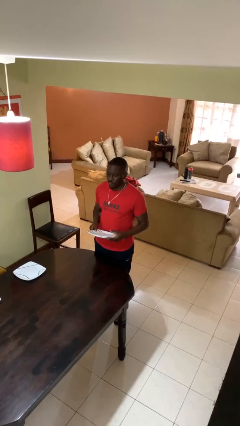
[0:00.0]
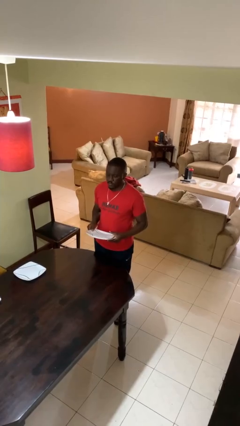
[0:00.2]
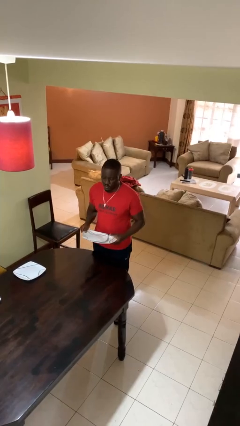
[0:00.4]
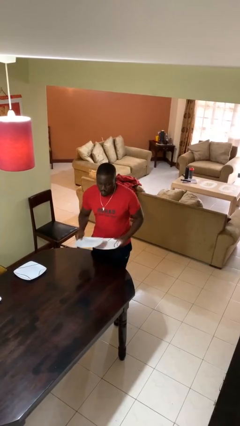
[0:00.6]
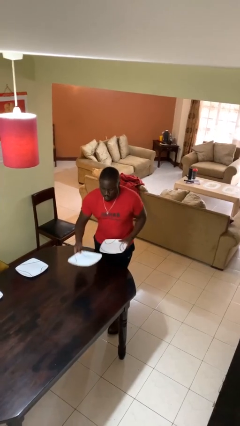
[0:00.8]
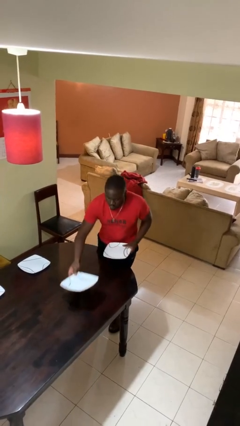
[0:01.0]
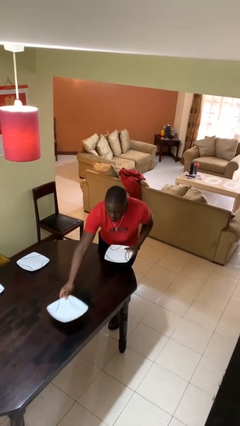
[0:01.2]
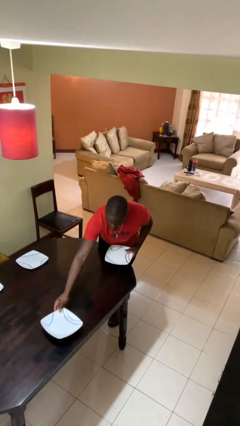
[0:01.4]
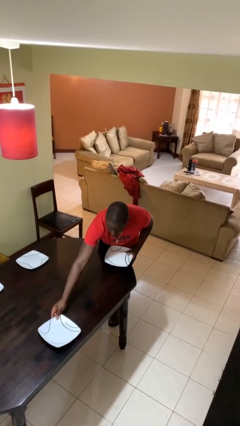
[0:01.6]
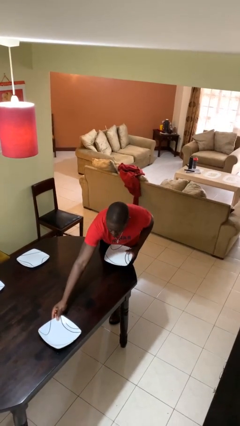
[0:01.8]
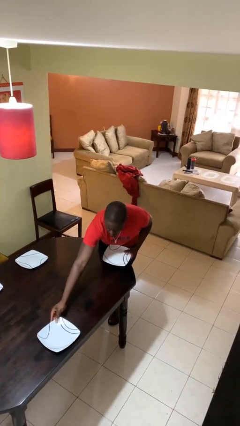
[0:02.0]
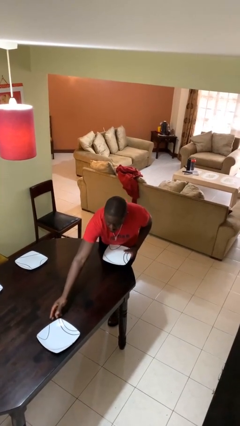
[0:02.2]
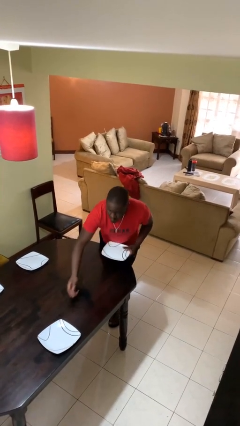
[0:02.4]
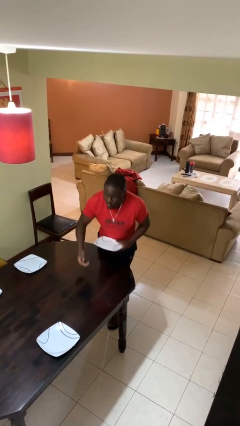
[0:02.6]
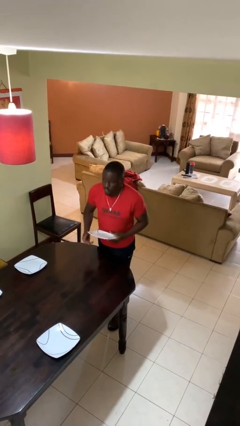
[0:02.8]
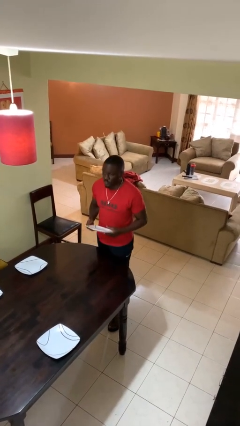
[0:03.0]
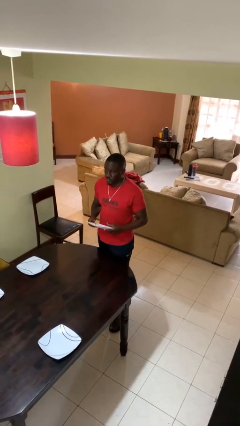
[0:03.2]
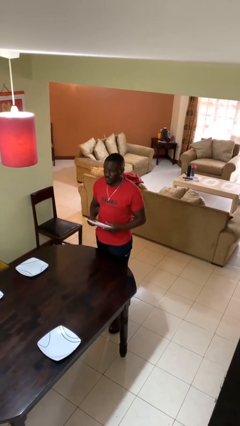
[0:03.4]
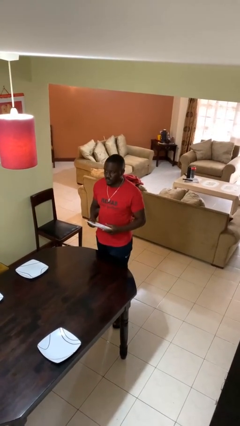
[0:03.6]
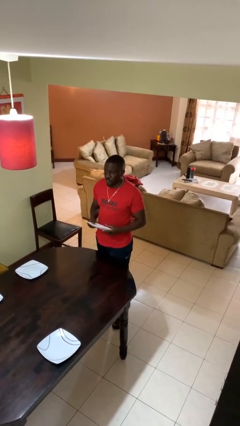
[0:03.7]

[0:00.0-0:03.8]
person sets table

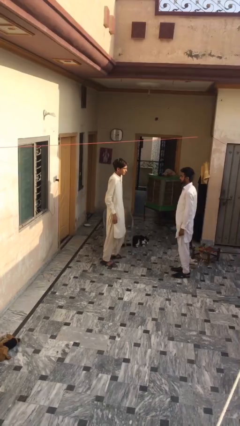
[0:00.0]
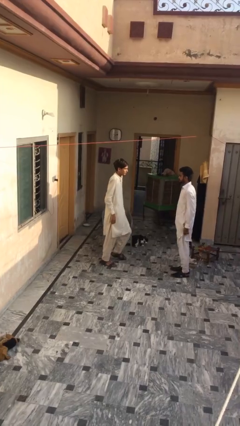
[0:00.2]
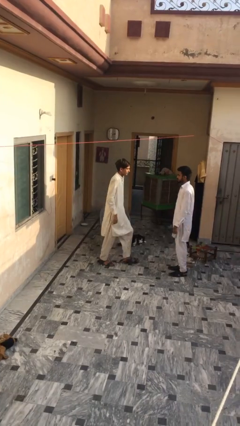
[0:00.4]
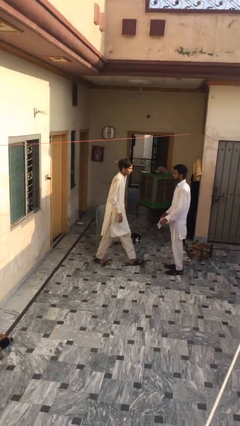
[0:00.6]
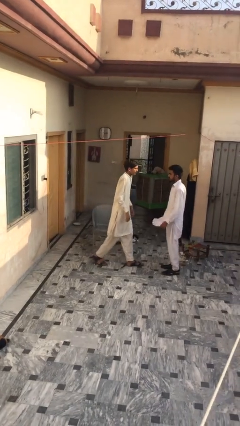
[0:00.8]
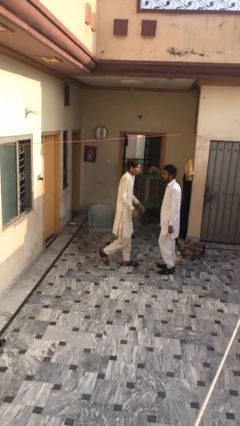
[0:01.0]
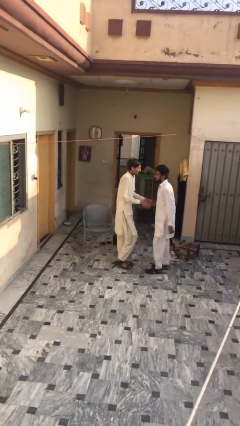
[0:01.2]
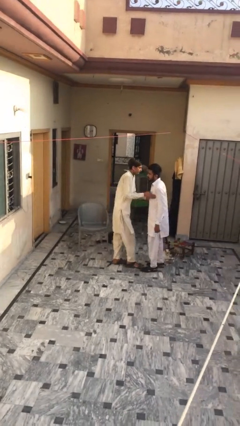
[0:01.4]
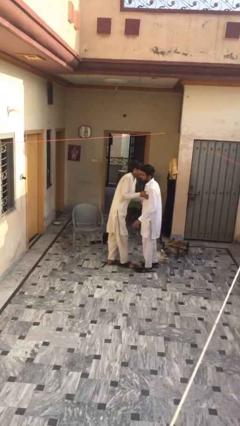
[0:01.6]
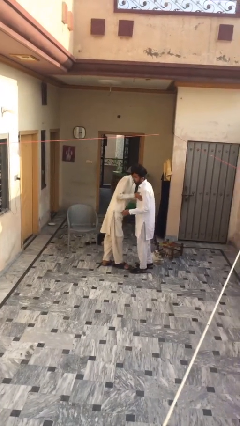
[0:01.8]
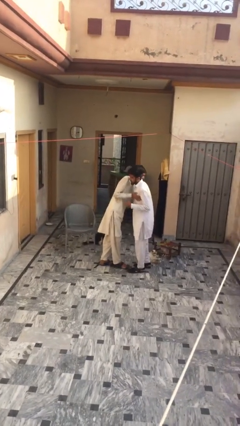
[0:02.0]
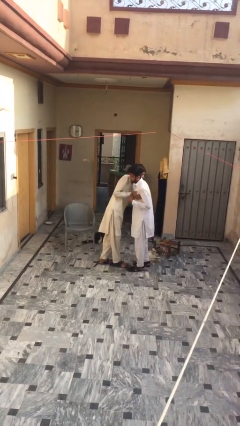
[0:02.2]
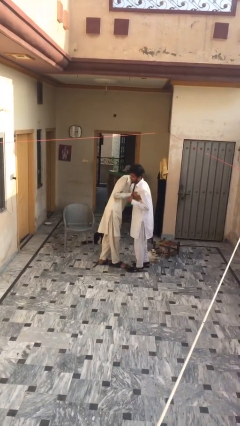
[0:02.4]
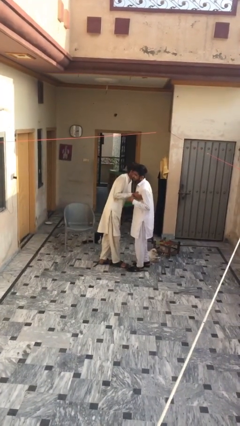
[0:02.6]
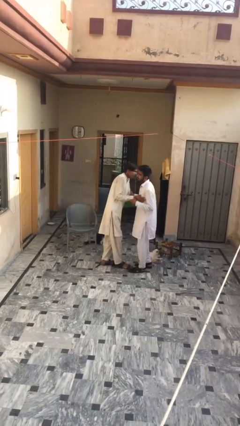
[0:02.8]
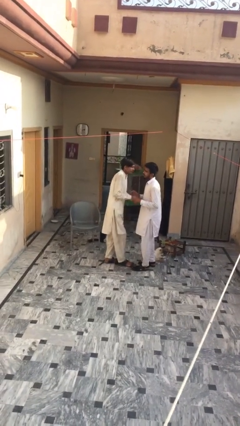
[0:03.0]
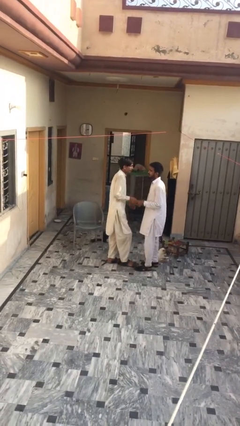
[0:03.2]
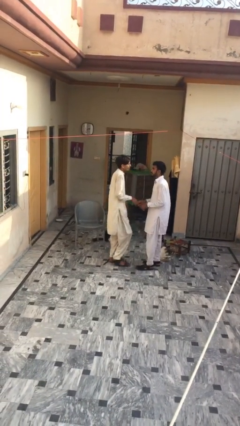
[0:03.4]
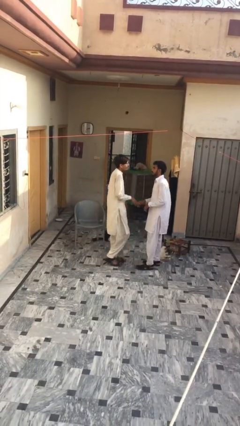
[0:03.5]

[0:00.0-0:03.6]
person embraces person

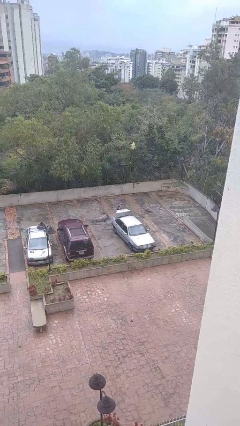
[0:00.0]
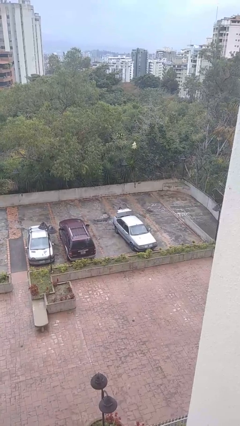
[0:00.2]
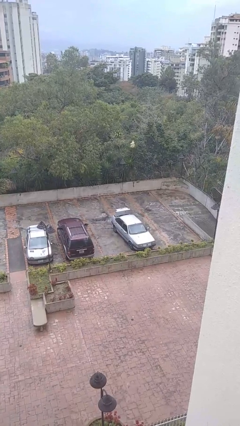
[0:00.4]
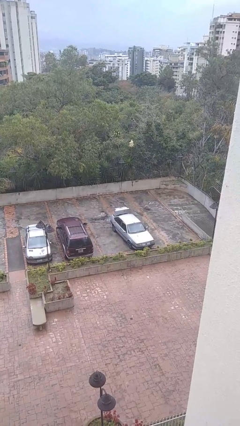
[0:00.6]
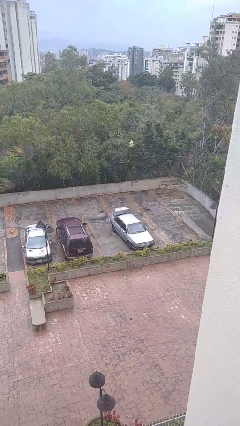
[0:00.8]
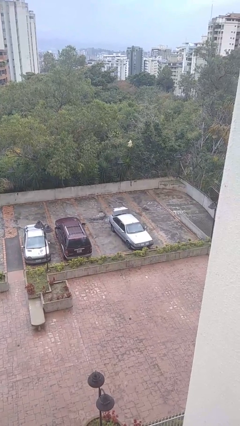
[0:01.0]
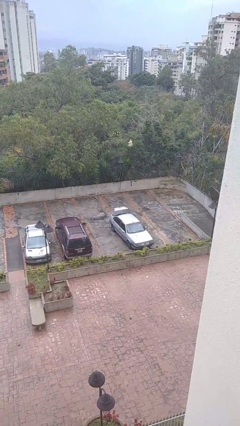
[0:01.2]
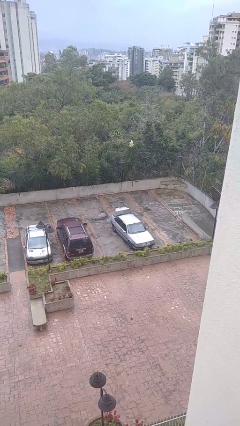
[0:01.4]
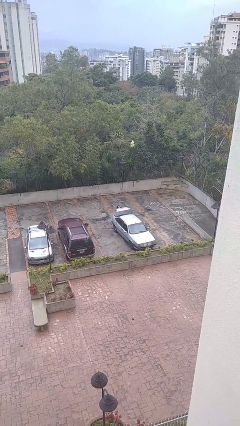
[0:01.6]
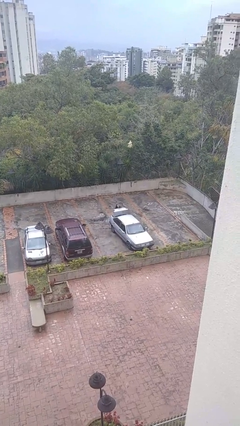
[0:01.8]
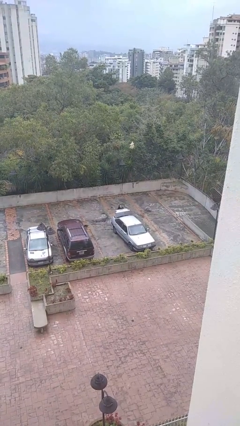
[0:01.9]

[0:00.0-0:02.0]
person unloads car

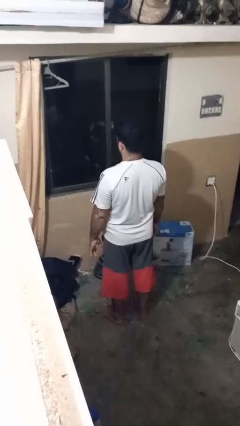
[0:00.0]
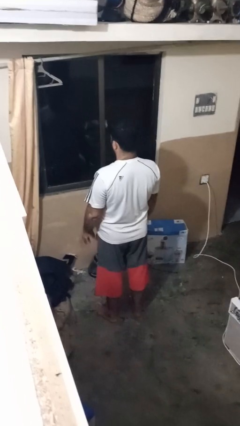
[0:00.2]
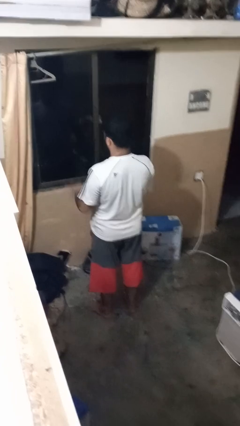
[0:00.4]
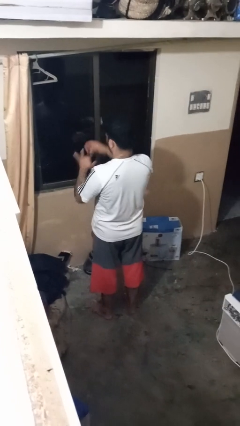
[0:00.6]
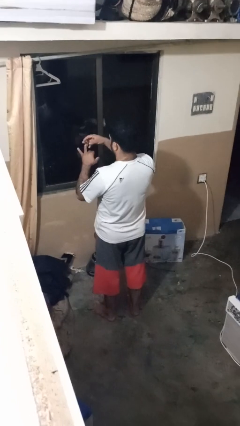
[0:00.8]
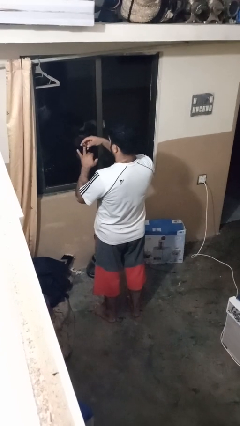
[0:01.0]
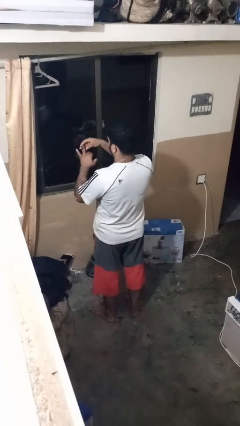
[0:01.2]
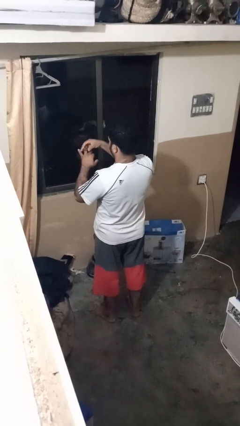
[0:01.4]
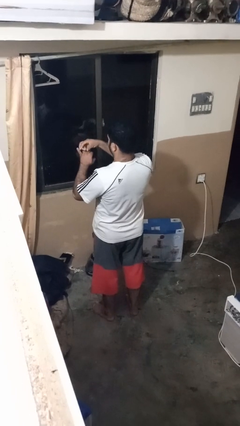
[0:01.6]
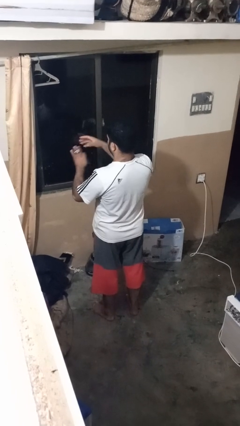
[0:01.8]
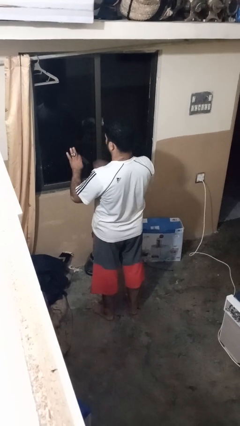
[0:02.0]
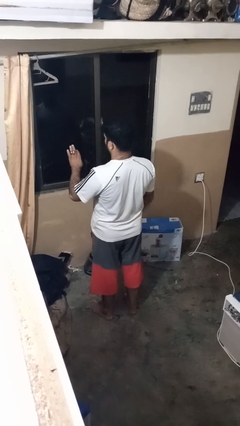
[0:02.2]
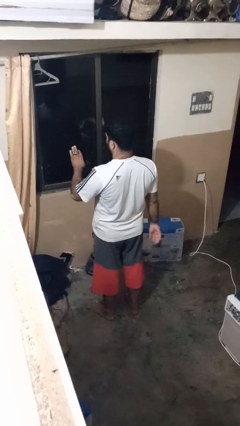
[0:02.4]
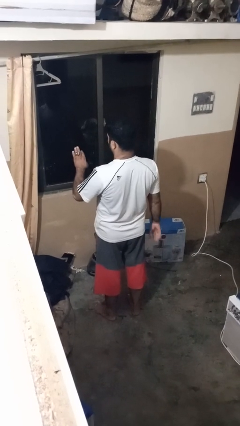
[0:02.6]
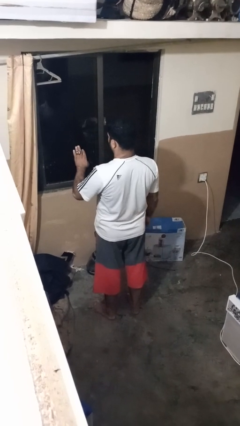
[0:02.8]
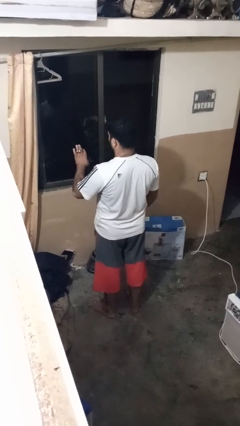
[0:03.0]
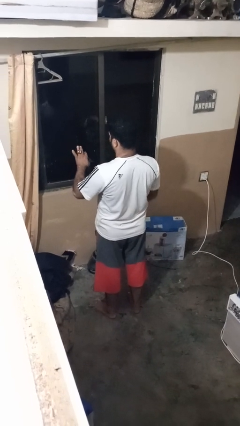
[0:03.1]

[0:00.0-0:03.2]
person puts on ring

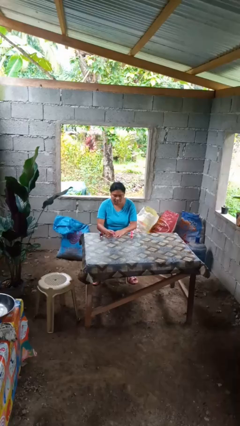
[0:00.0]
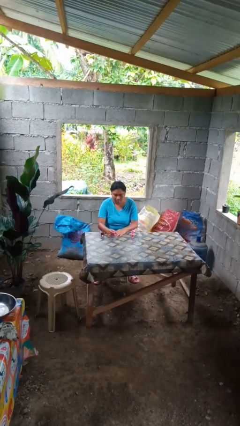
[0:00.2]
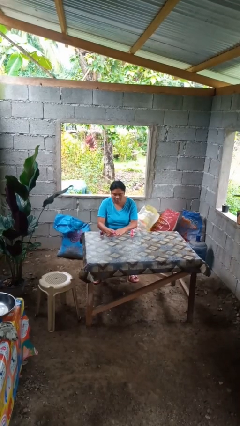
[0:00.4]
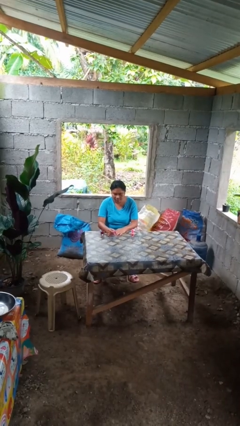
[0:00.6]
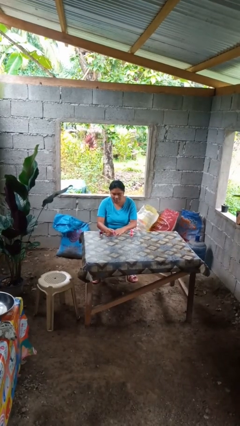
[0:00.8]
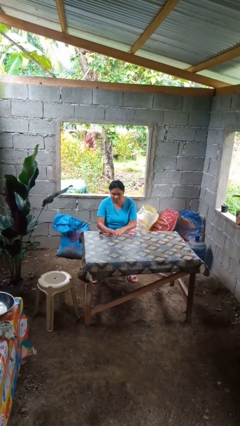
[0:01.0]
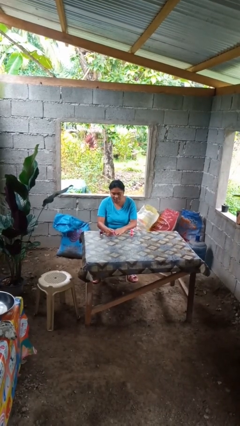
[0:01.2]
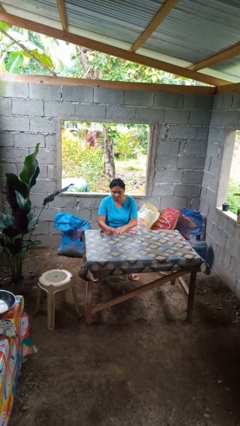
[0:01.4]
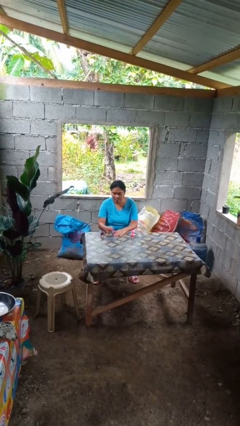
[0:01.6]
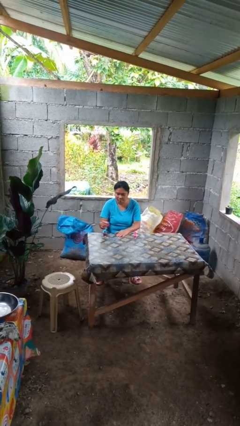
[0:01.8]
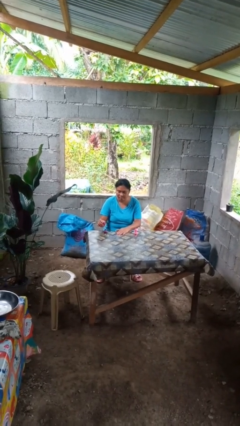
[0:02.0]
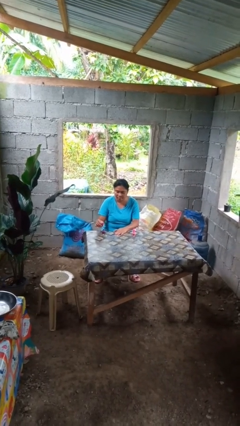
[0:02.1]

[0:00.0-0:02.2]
person paints fingernails

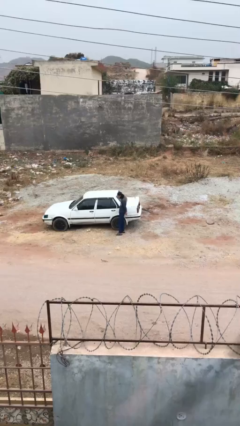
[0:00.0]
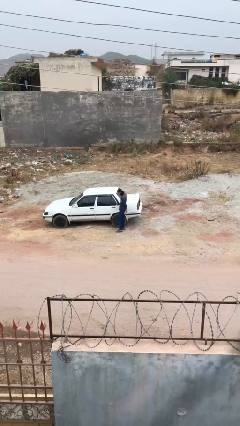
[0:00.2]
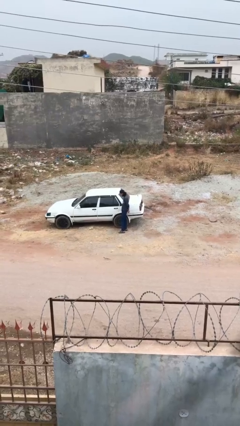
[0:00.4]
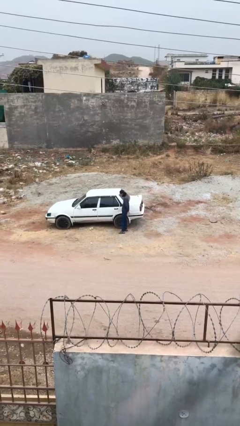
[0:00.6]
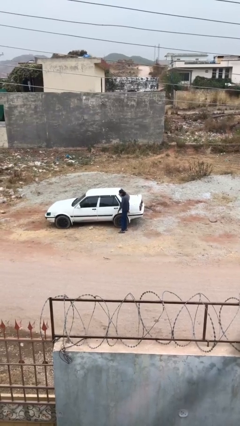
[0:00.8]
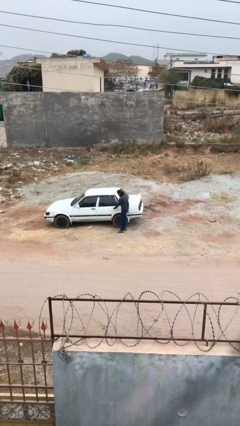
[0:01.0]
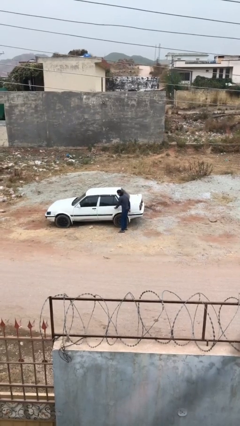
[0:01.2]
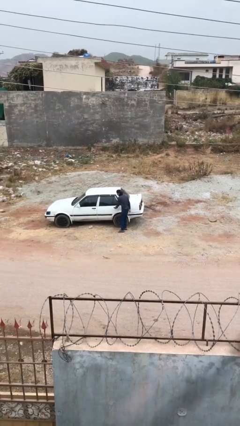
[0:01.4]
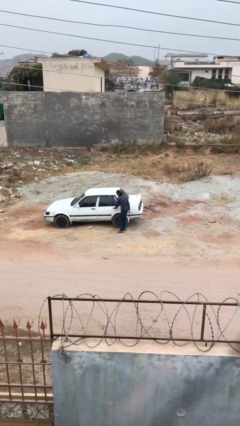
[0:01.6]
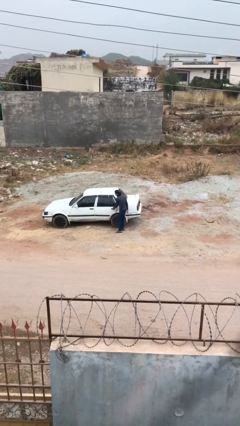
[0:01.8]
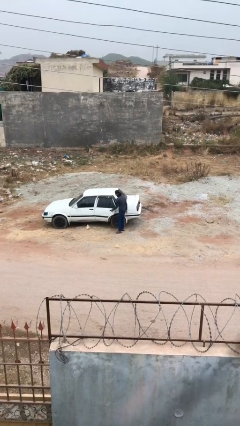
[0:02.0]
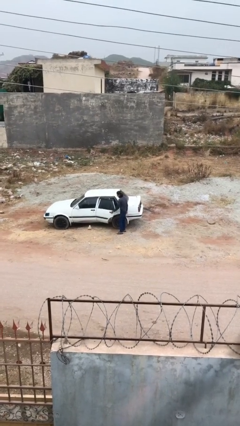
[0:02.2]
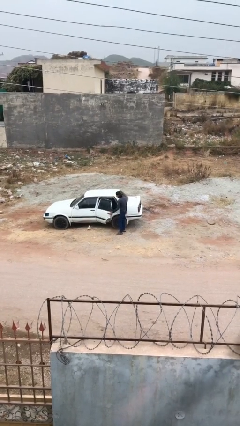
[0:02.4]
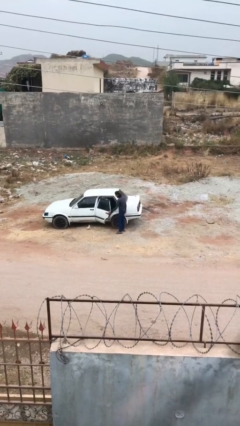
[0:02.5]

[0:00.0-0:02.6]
person opens car door
